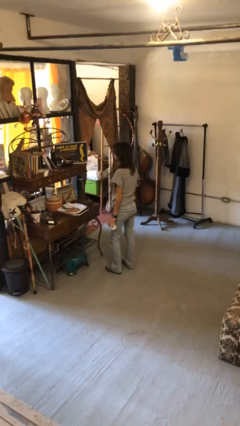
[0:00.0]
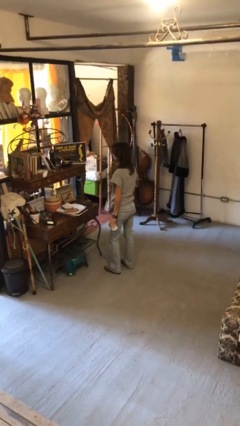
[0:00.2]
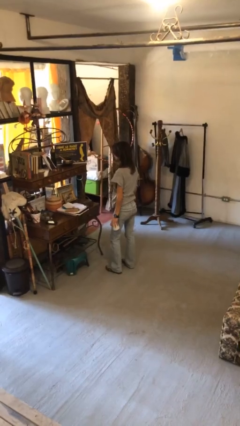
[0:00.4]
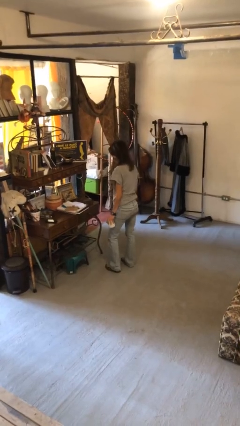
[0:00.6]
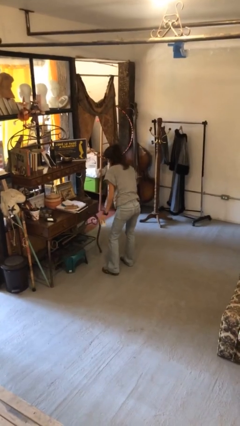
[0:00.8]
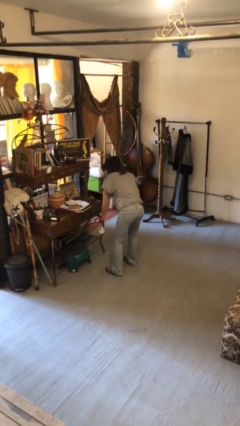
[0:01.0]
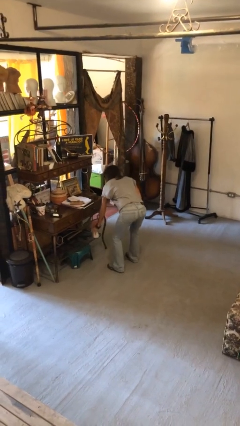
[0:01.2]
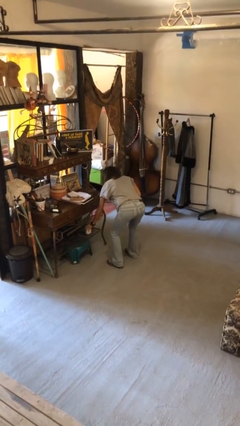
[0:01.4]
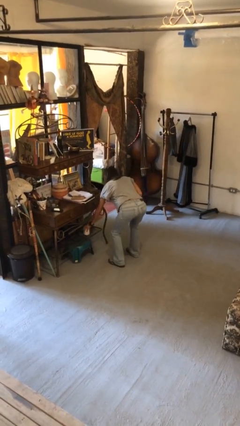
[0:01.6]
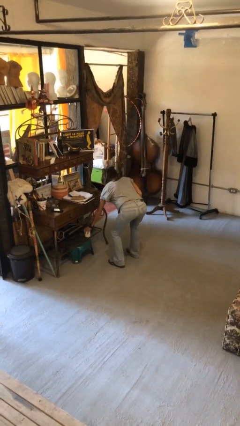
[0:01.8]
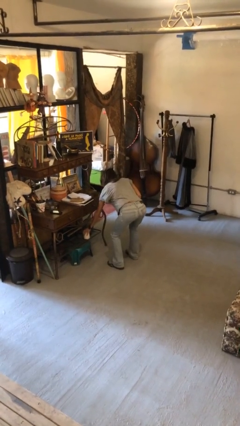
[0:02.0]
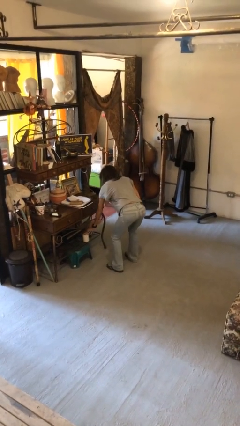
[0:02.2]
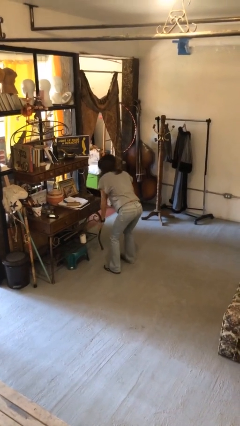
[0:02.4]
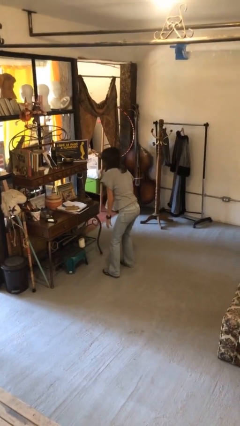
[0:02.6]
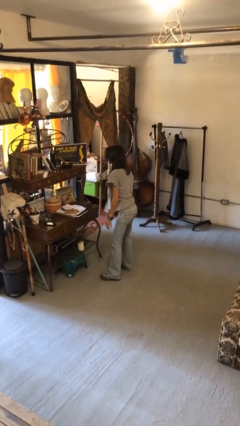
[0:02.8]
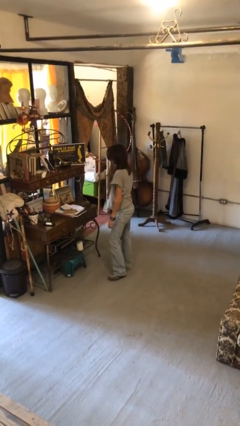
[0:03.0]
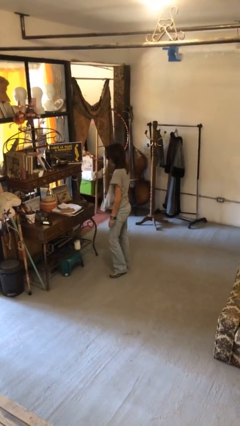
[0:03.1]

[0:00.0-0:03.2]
person puts down object into cabinet

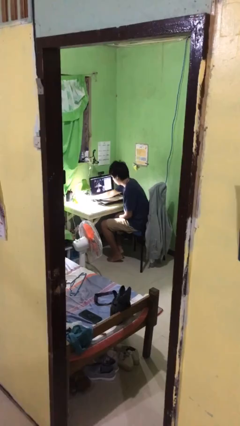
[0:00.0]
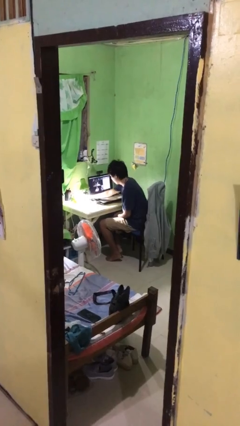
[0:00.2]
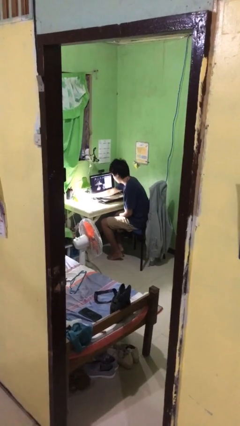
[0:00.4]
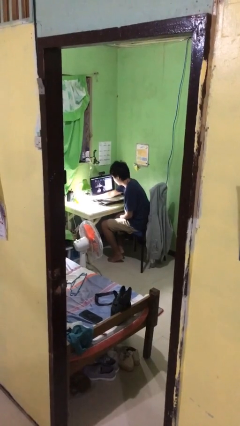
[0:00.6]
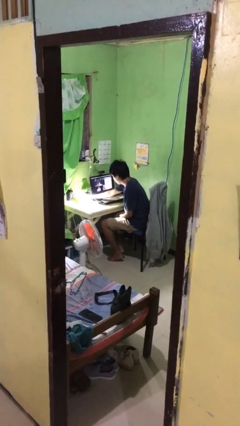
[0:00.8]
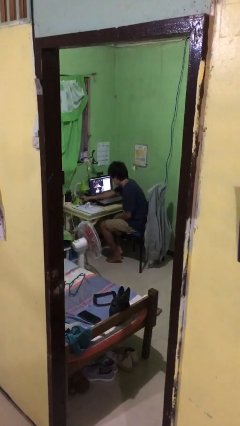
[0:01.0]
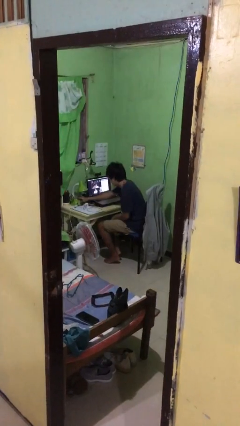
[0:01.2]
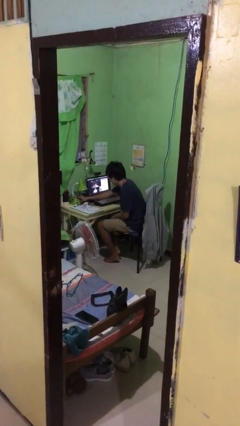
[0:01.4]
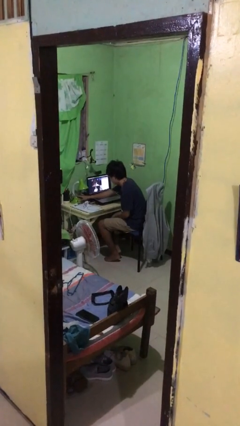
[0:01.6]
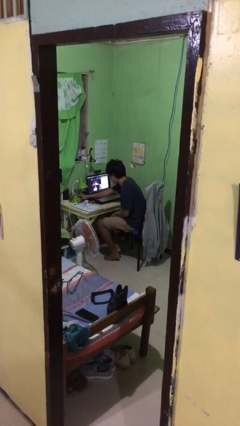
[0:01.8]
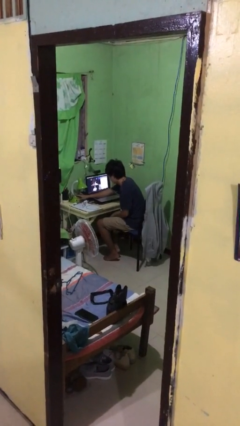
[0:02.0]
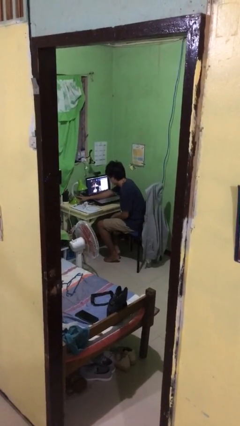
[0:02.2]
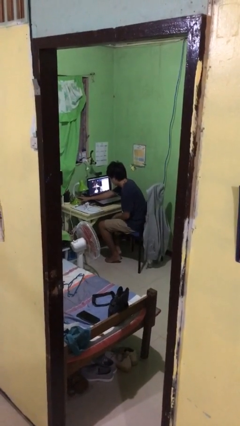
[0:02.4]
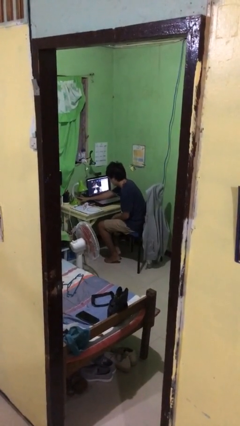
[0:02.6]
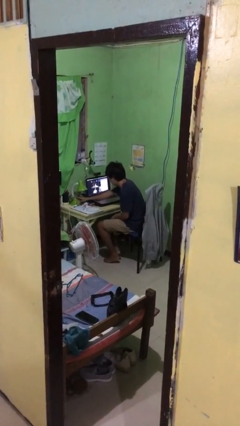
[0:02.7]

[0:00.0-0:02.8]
person turns off lamp

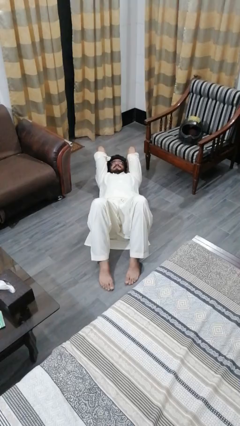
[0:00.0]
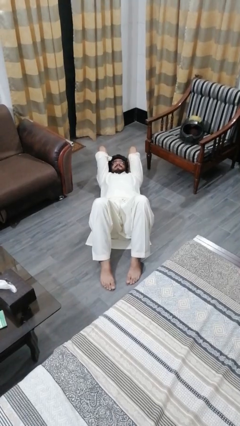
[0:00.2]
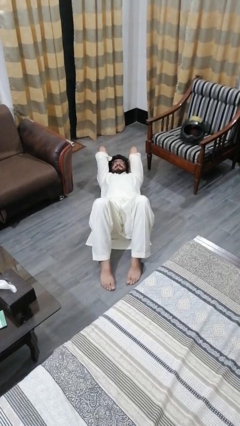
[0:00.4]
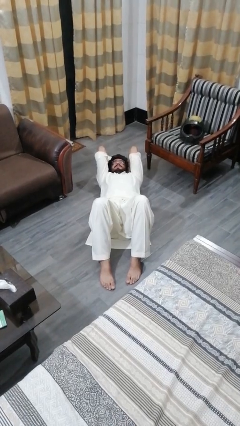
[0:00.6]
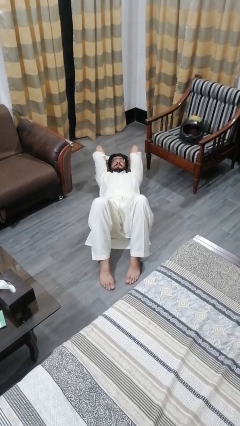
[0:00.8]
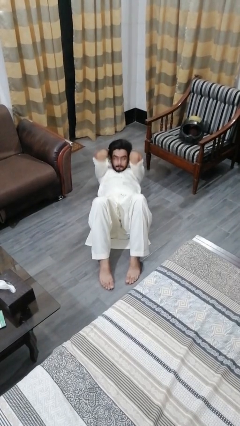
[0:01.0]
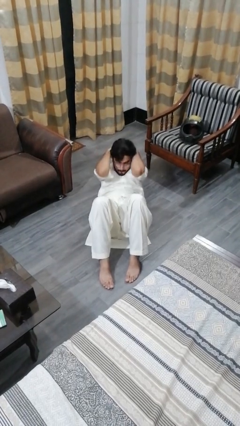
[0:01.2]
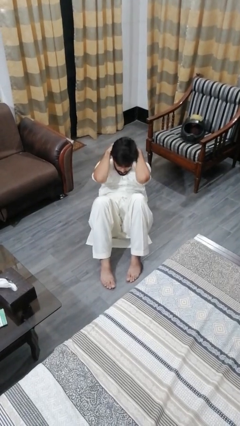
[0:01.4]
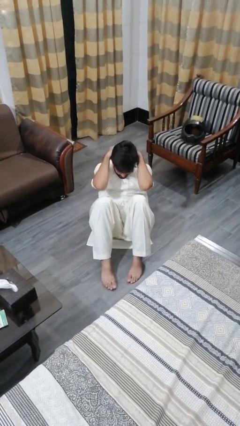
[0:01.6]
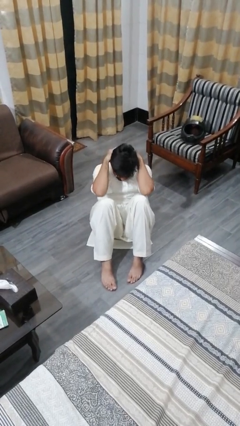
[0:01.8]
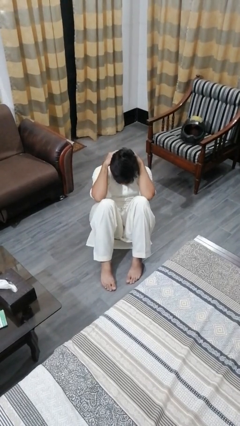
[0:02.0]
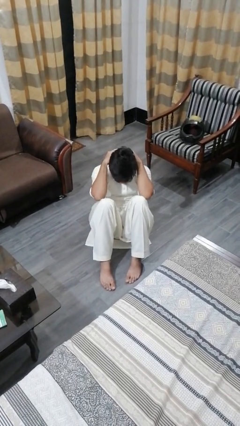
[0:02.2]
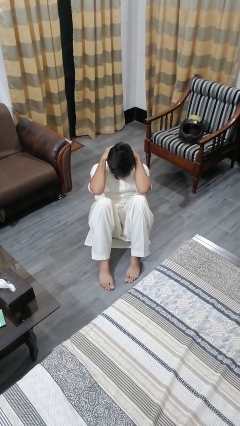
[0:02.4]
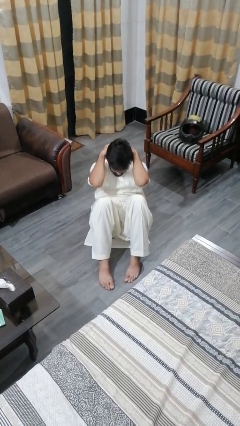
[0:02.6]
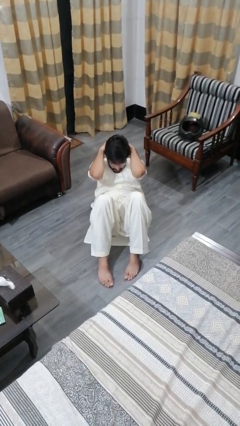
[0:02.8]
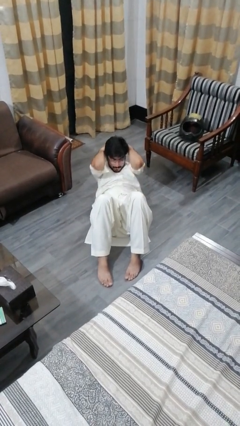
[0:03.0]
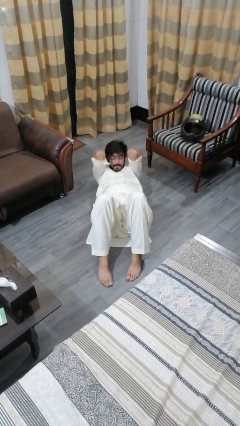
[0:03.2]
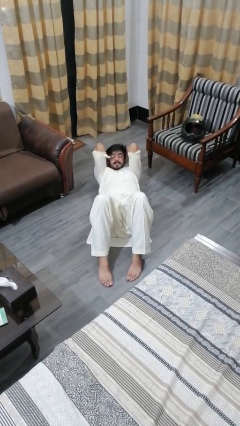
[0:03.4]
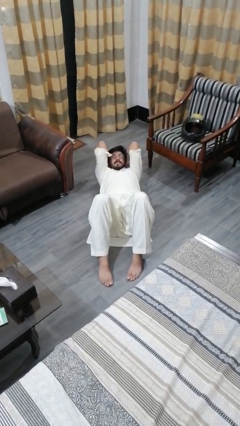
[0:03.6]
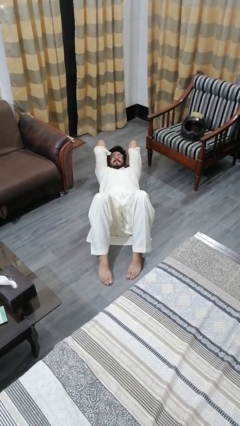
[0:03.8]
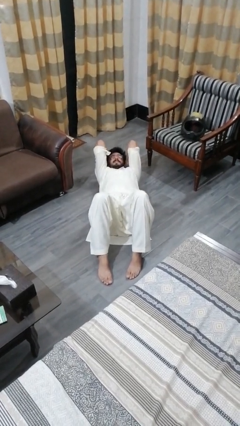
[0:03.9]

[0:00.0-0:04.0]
person exercises with situp

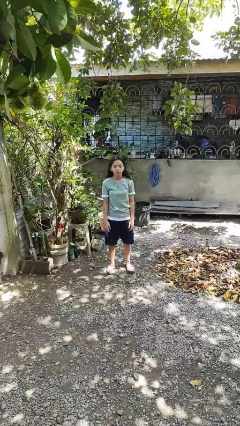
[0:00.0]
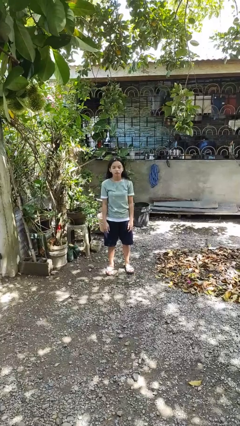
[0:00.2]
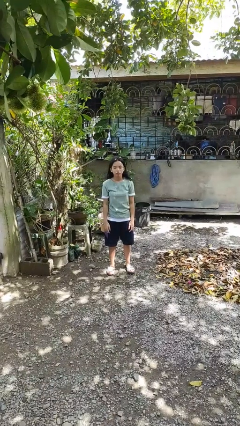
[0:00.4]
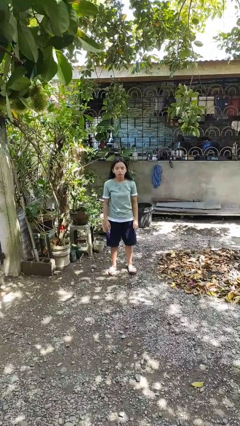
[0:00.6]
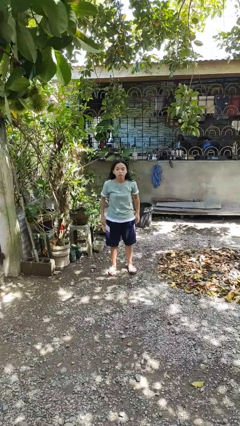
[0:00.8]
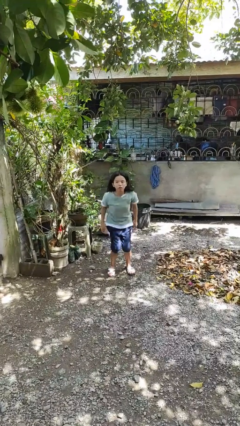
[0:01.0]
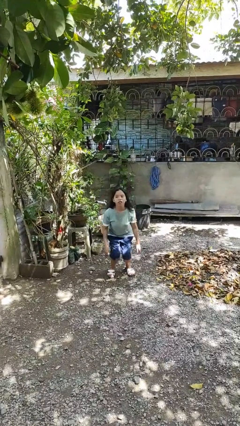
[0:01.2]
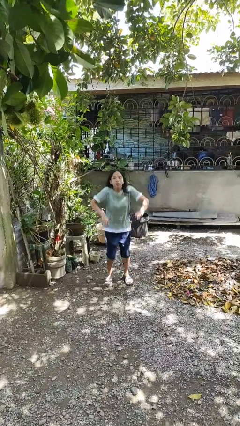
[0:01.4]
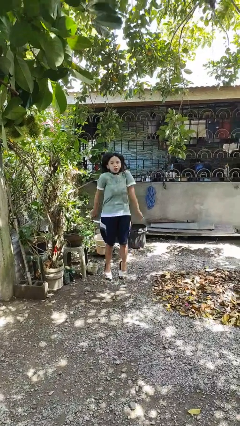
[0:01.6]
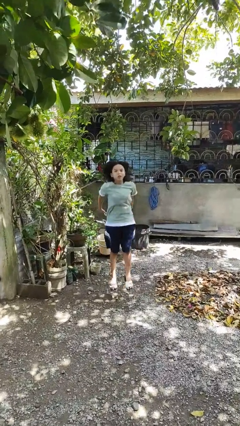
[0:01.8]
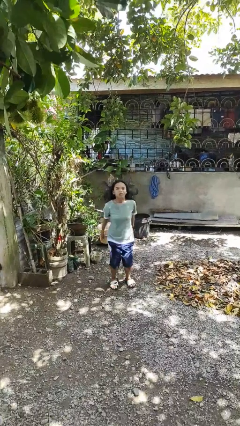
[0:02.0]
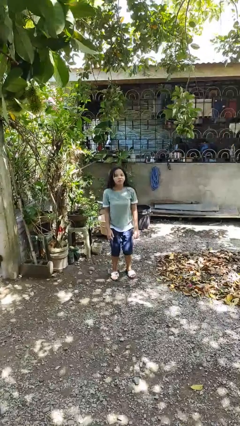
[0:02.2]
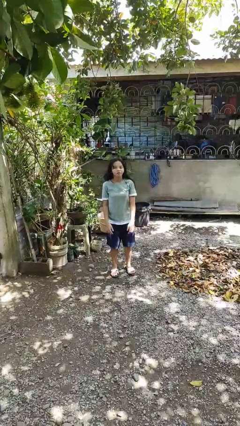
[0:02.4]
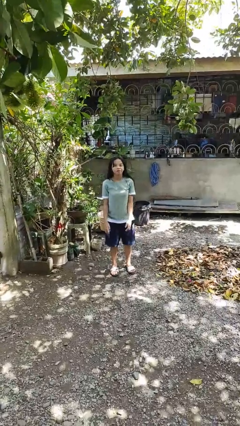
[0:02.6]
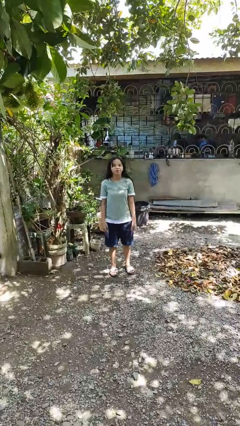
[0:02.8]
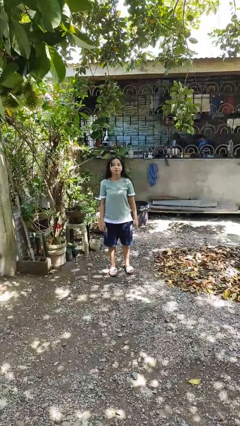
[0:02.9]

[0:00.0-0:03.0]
person jumps

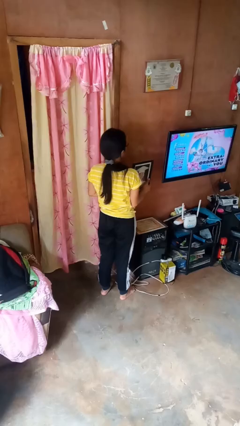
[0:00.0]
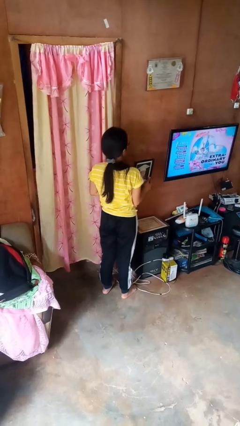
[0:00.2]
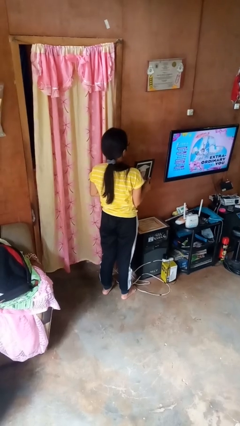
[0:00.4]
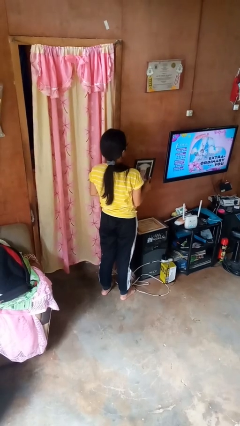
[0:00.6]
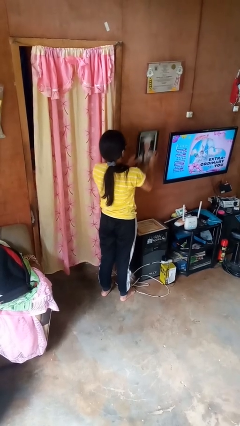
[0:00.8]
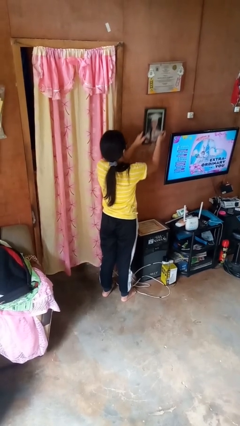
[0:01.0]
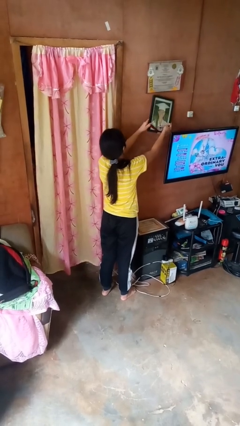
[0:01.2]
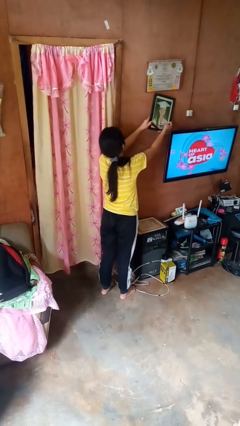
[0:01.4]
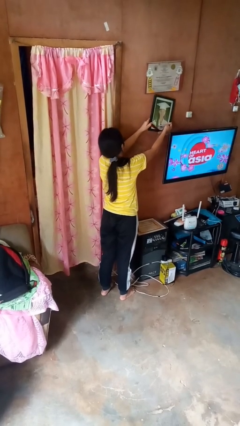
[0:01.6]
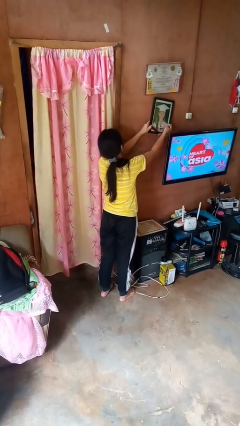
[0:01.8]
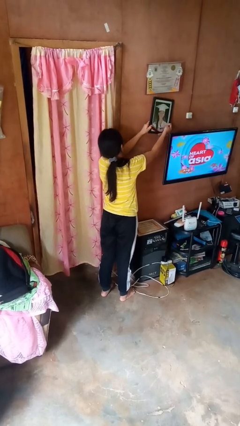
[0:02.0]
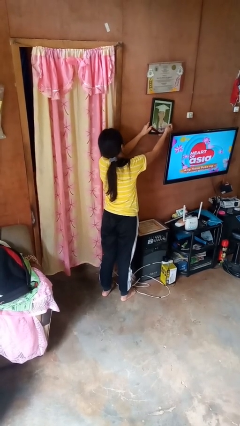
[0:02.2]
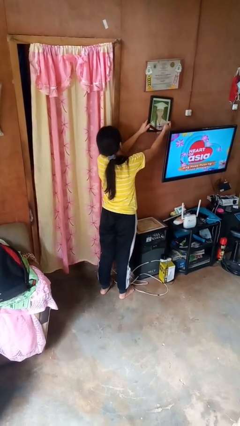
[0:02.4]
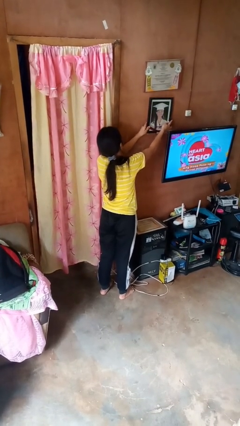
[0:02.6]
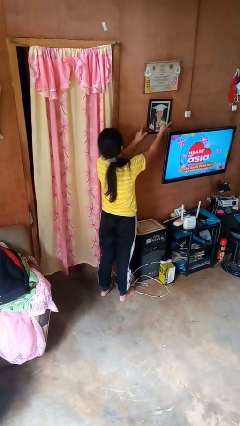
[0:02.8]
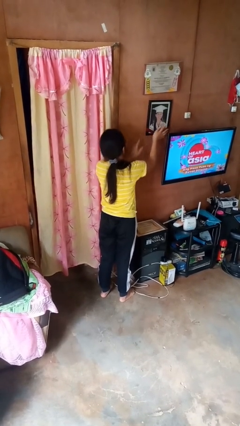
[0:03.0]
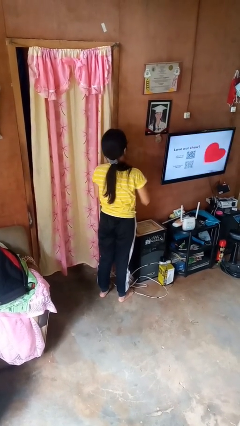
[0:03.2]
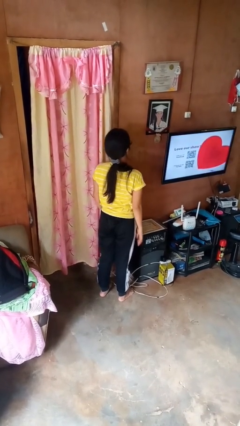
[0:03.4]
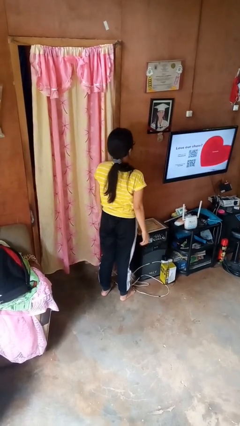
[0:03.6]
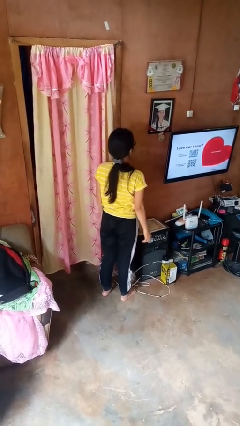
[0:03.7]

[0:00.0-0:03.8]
person puts up picture frame

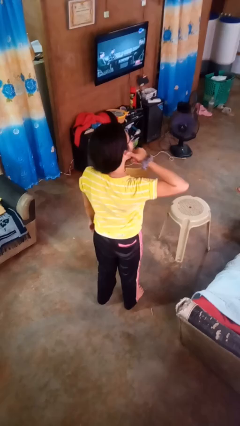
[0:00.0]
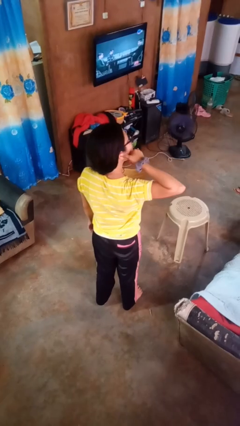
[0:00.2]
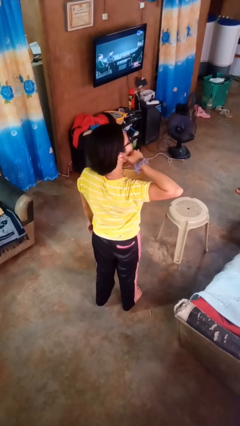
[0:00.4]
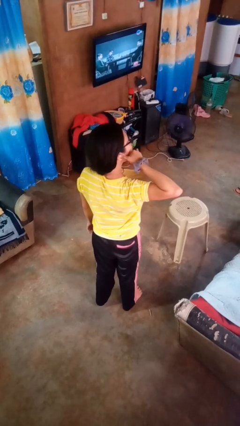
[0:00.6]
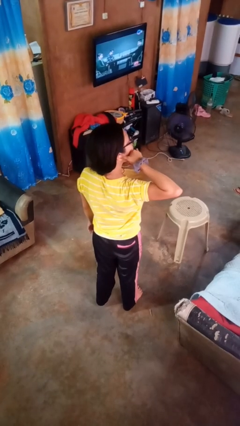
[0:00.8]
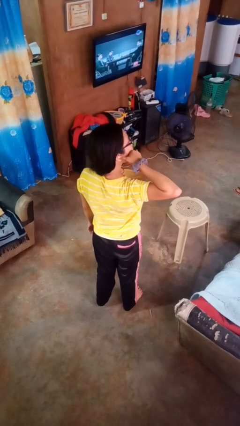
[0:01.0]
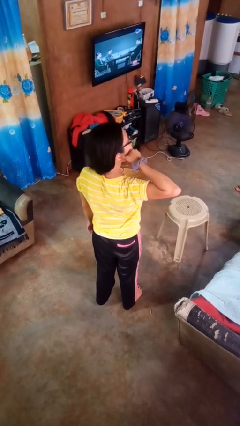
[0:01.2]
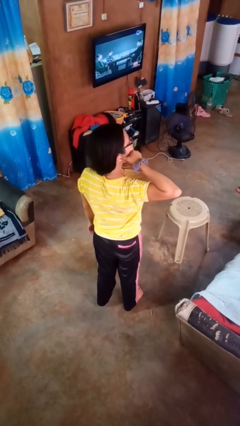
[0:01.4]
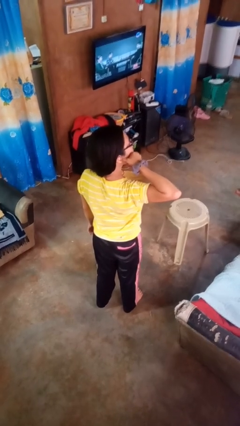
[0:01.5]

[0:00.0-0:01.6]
person gestures call me
